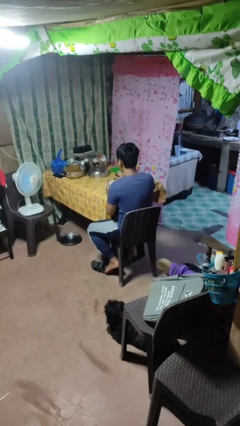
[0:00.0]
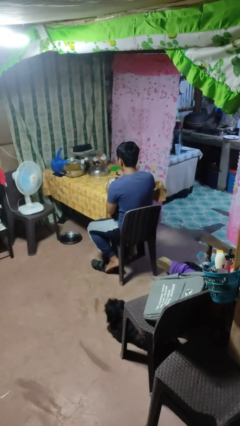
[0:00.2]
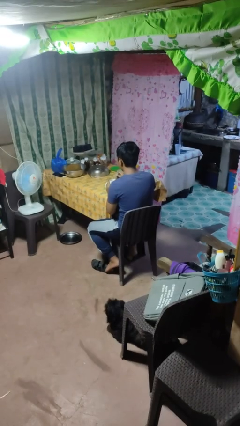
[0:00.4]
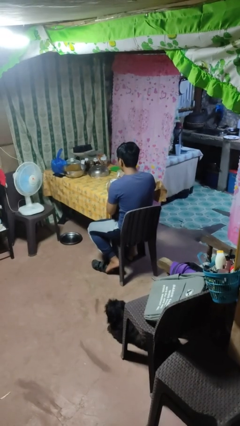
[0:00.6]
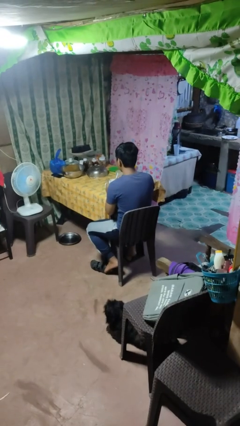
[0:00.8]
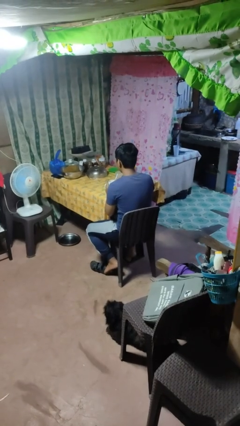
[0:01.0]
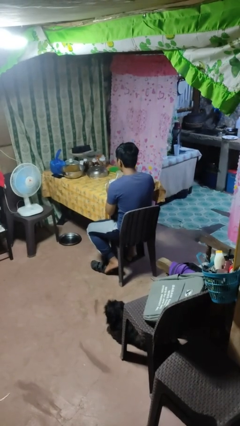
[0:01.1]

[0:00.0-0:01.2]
person stirs mug

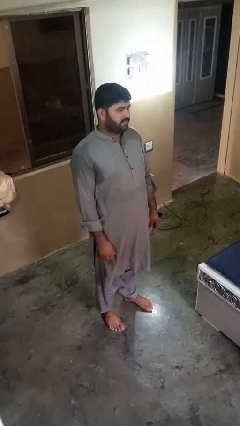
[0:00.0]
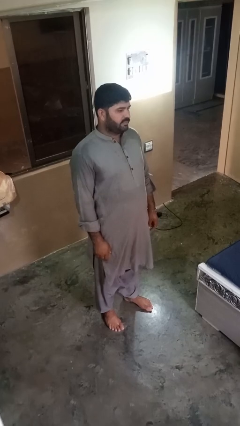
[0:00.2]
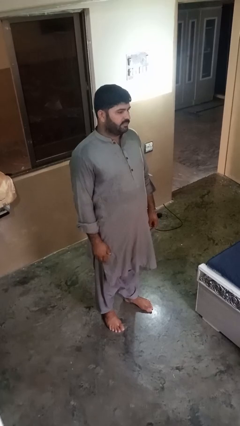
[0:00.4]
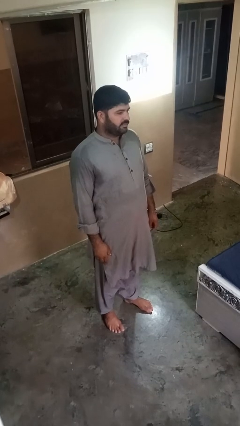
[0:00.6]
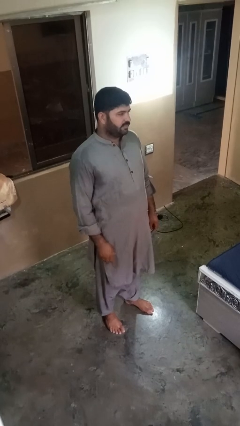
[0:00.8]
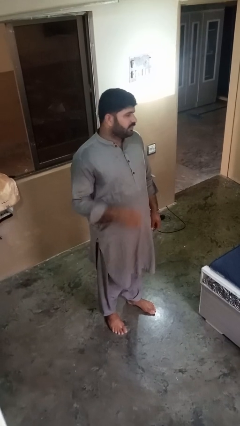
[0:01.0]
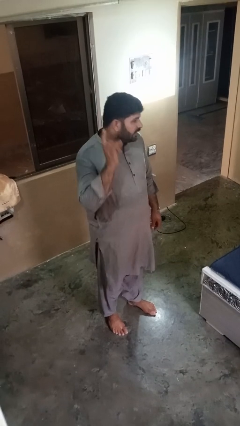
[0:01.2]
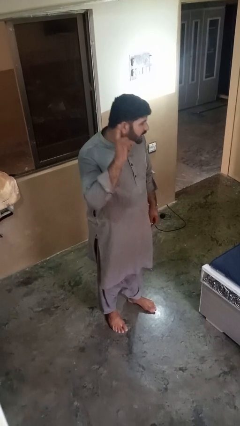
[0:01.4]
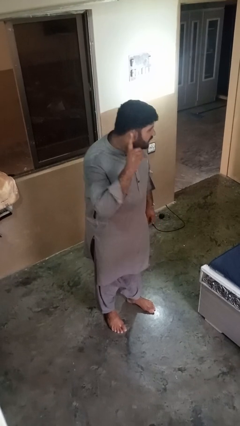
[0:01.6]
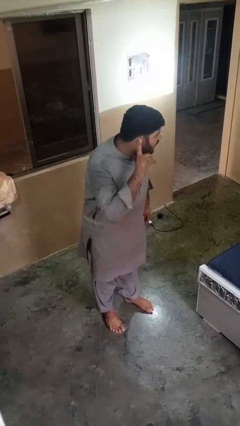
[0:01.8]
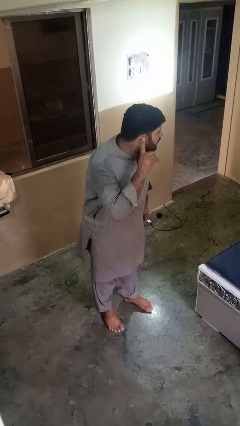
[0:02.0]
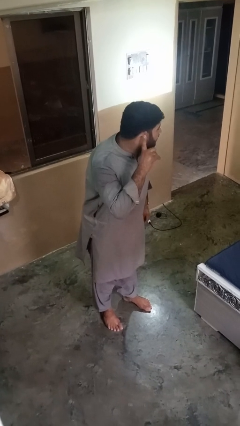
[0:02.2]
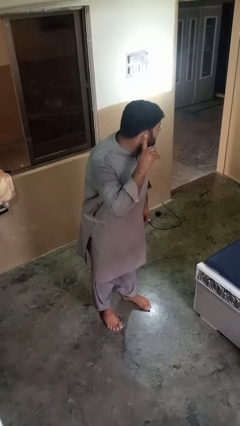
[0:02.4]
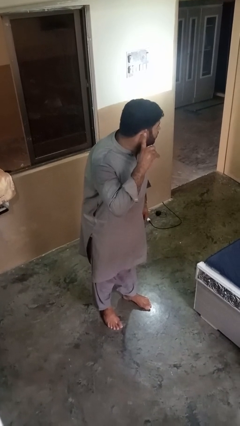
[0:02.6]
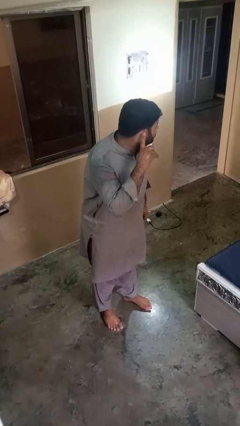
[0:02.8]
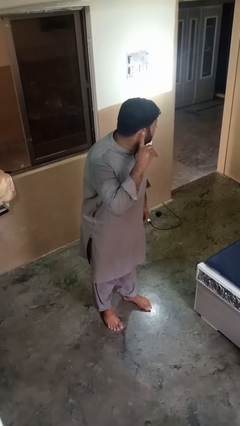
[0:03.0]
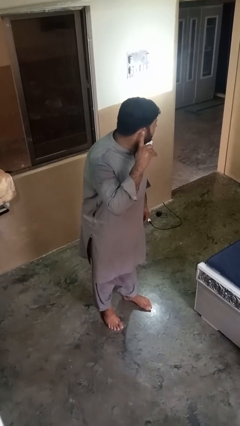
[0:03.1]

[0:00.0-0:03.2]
person gestures listen closely

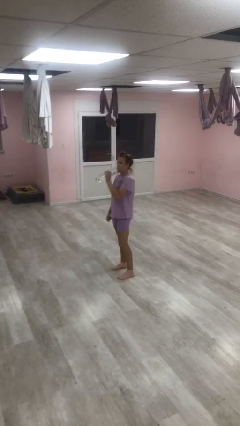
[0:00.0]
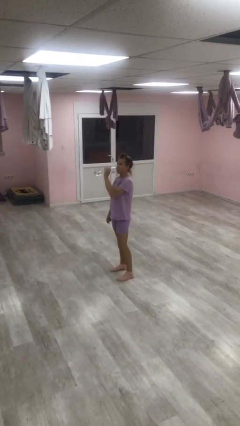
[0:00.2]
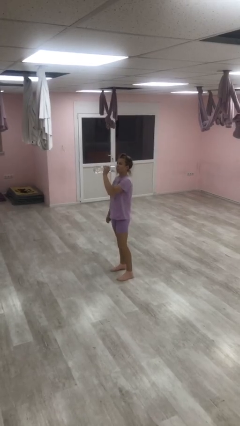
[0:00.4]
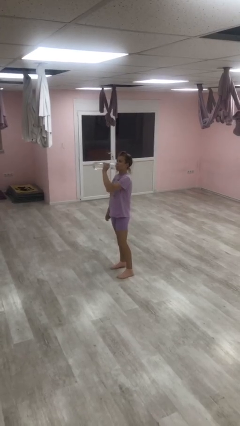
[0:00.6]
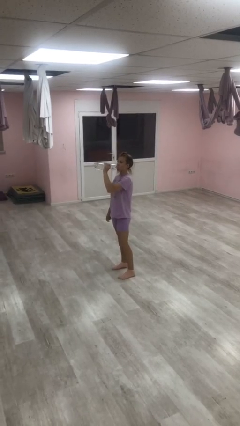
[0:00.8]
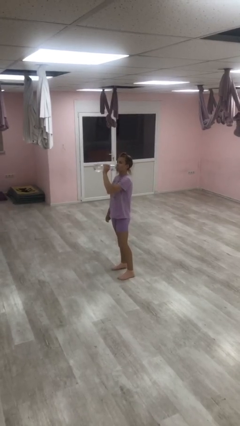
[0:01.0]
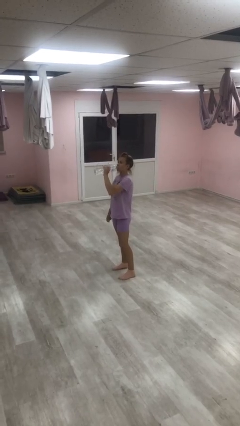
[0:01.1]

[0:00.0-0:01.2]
person drinks from bottle

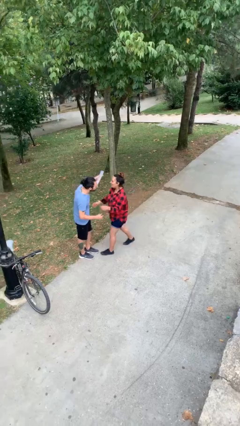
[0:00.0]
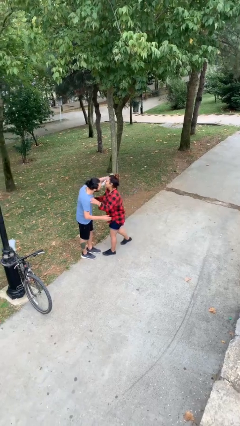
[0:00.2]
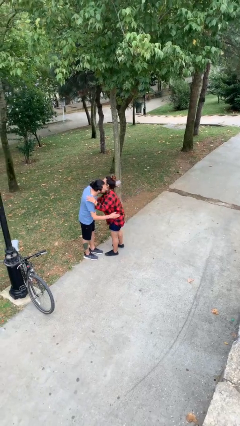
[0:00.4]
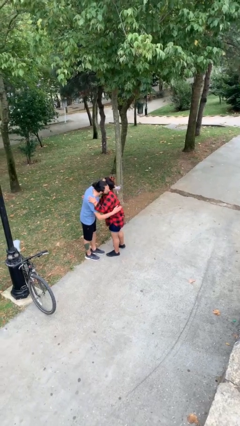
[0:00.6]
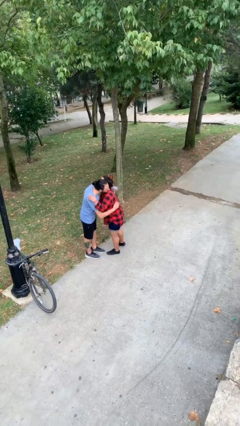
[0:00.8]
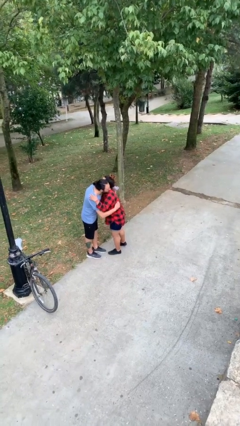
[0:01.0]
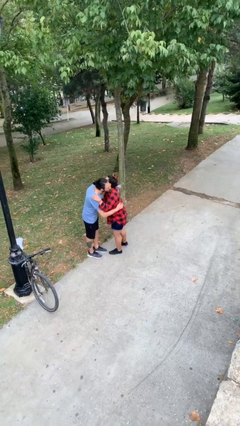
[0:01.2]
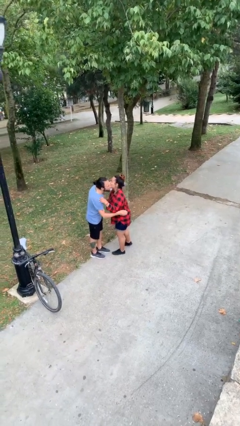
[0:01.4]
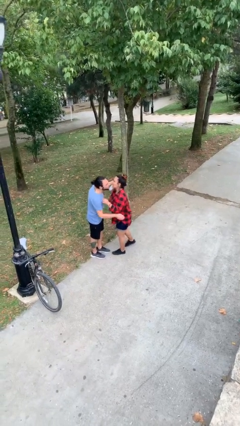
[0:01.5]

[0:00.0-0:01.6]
person embraces person

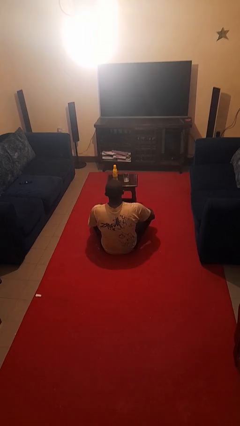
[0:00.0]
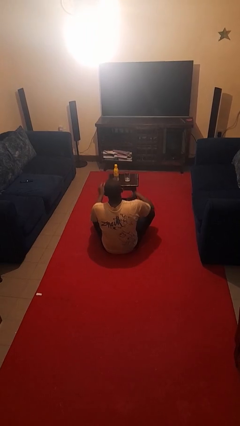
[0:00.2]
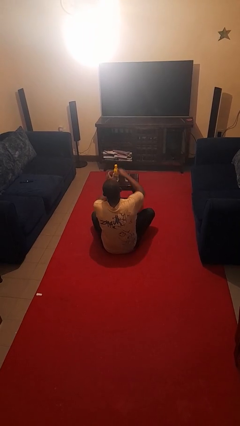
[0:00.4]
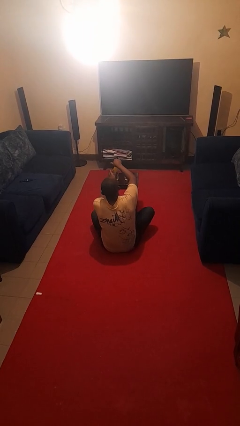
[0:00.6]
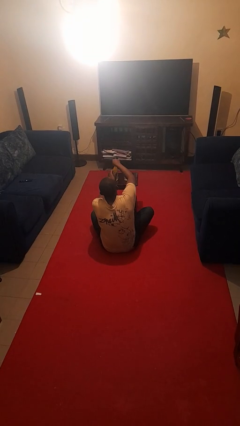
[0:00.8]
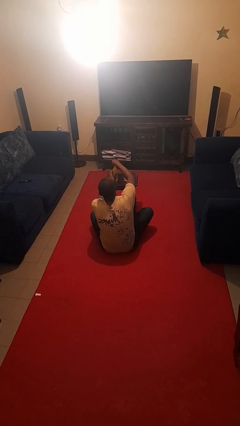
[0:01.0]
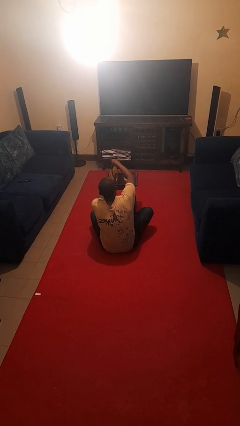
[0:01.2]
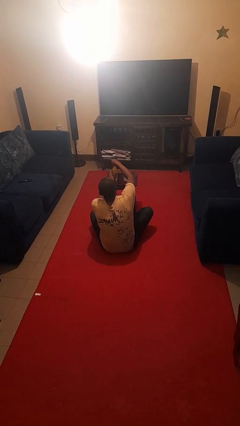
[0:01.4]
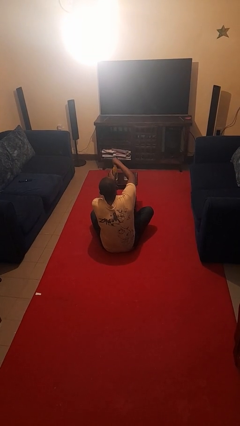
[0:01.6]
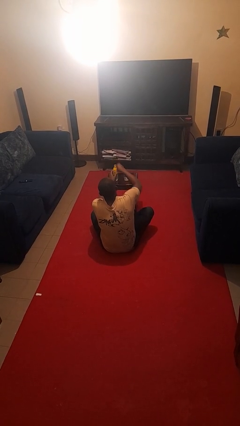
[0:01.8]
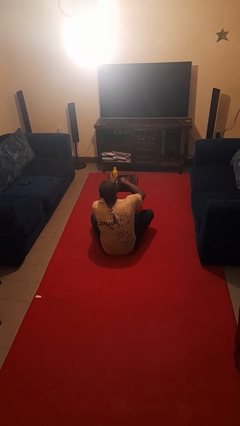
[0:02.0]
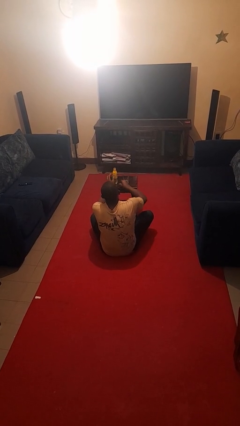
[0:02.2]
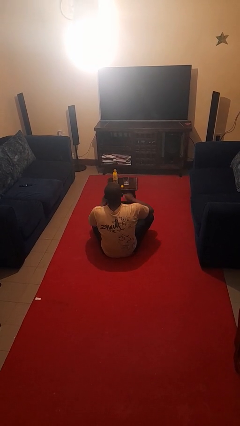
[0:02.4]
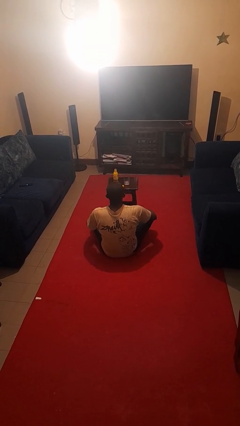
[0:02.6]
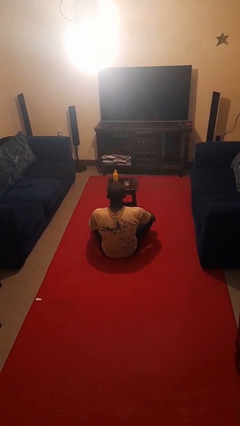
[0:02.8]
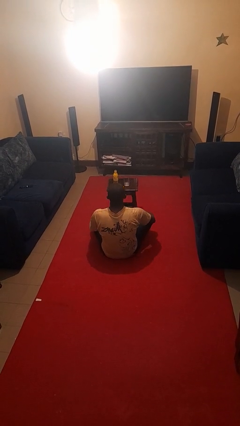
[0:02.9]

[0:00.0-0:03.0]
person unscrews lid from bottle

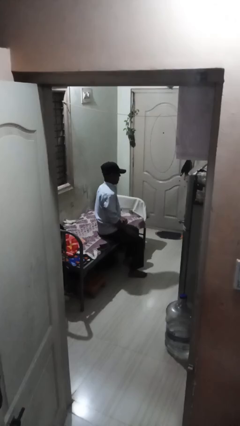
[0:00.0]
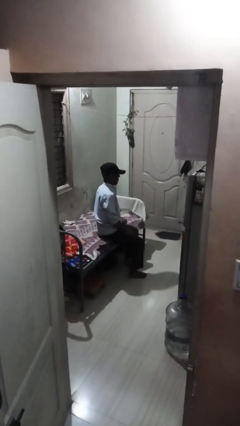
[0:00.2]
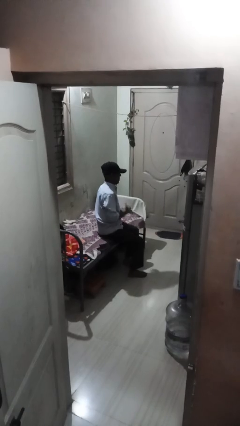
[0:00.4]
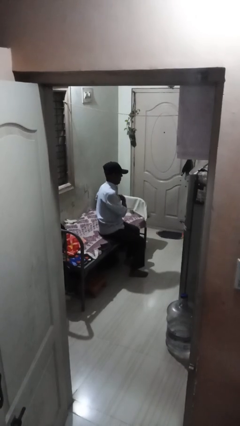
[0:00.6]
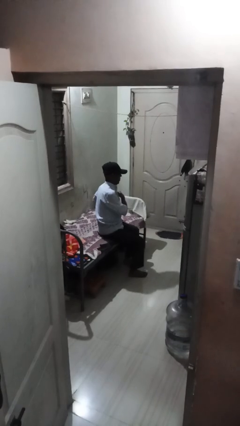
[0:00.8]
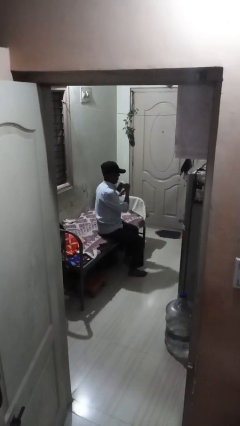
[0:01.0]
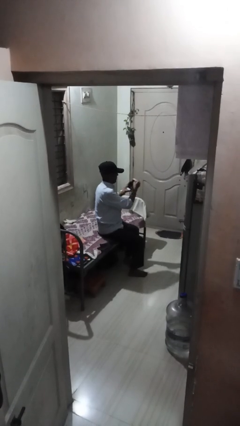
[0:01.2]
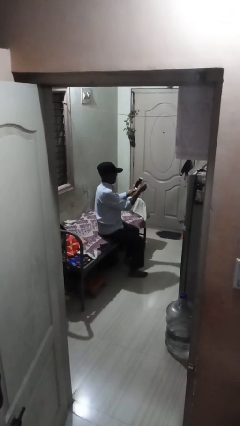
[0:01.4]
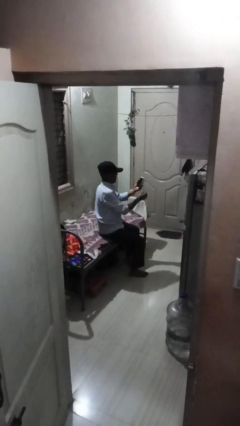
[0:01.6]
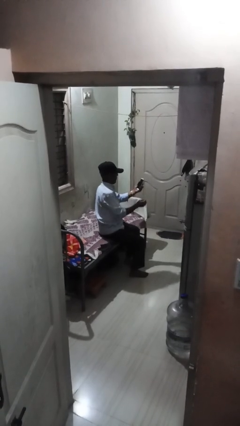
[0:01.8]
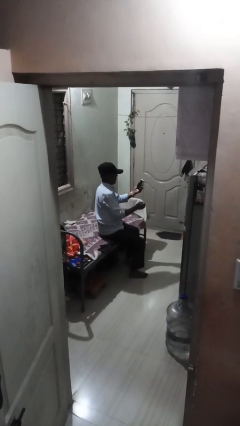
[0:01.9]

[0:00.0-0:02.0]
person takes phone from pocket

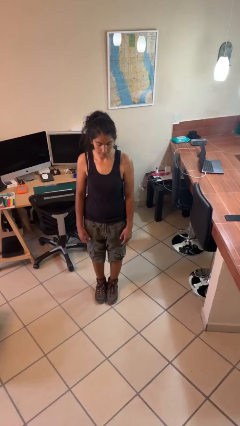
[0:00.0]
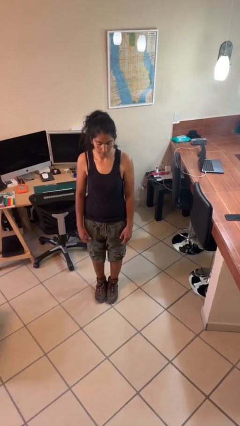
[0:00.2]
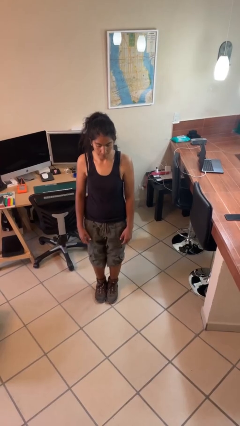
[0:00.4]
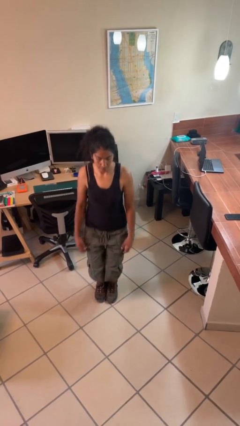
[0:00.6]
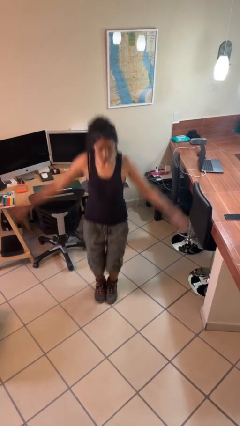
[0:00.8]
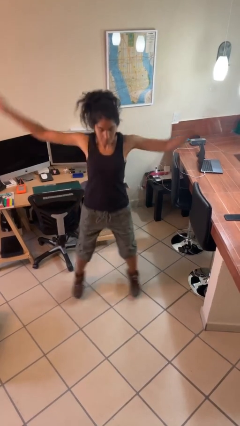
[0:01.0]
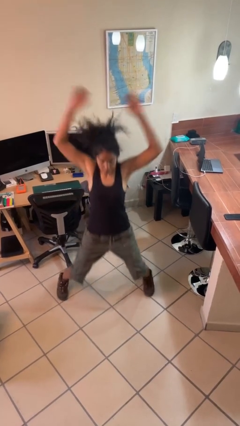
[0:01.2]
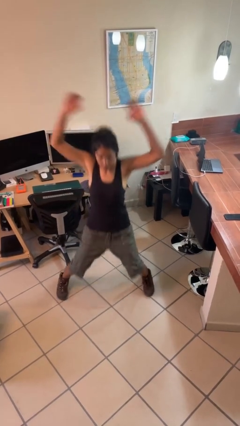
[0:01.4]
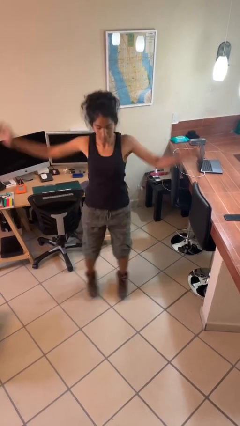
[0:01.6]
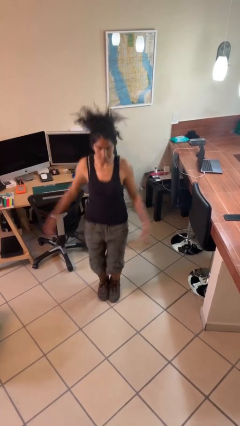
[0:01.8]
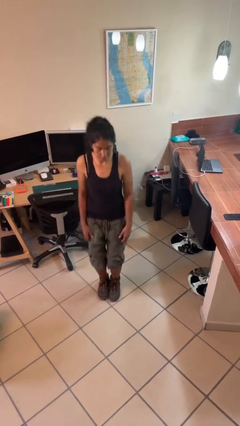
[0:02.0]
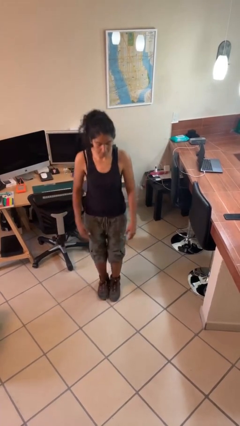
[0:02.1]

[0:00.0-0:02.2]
person exercises with jumping jacks

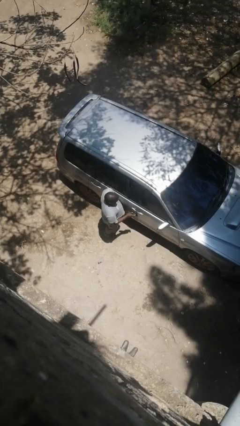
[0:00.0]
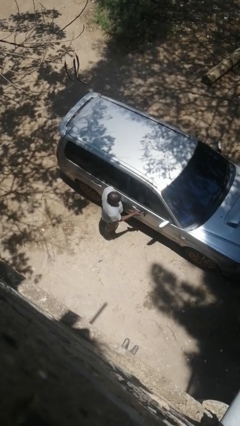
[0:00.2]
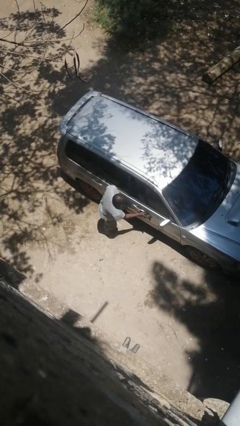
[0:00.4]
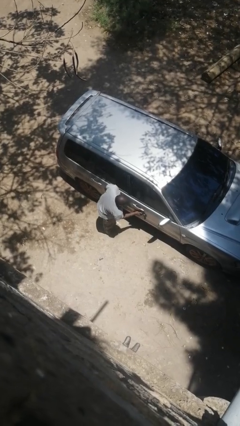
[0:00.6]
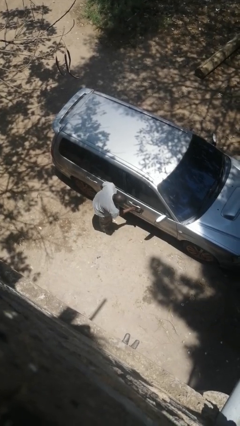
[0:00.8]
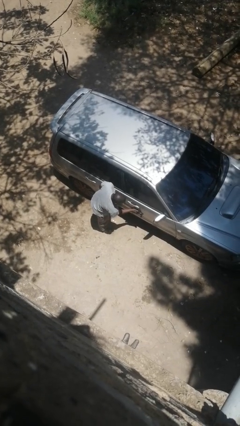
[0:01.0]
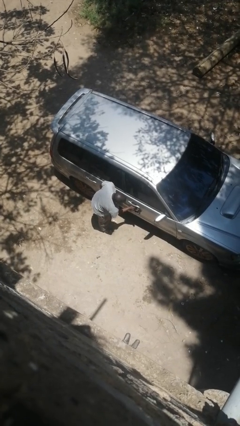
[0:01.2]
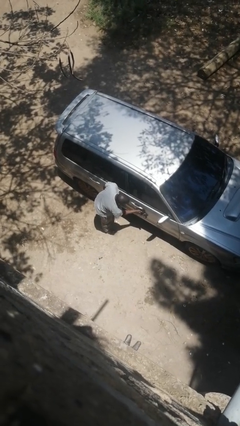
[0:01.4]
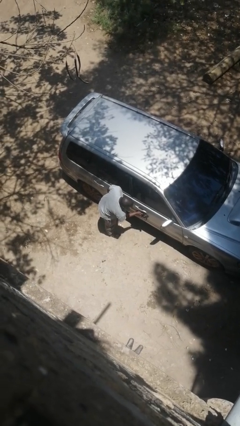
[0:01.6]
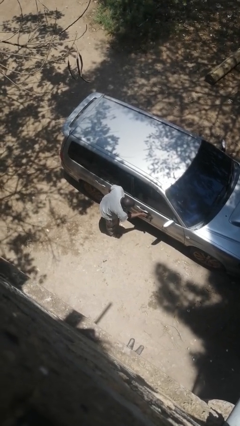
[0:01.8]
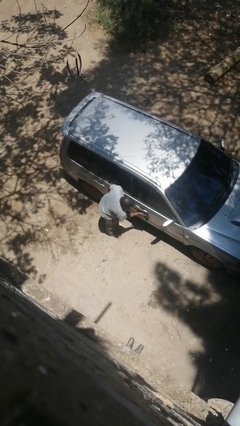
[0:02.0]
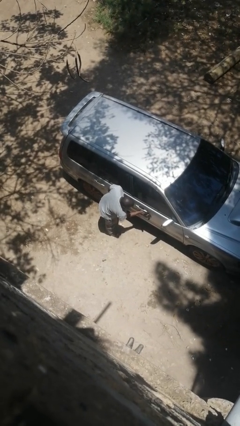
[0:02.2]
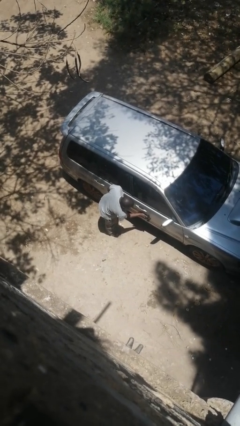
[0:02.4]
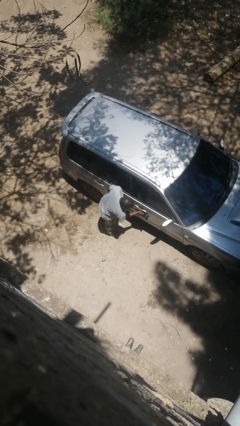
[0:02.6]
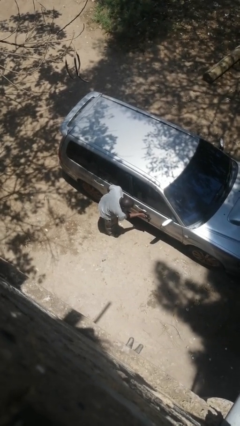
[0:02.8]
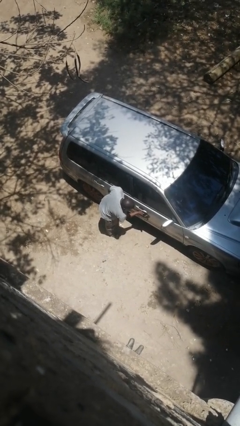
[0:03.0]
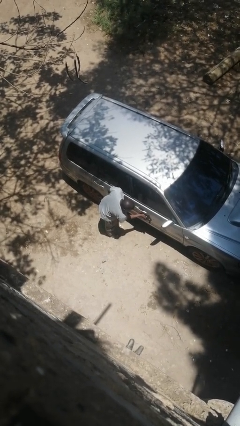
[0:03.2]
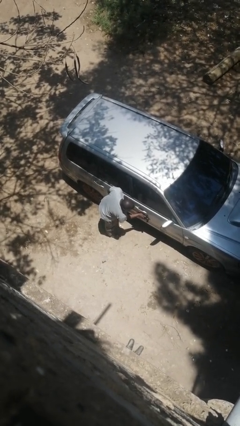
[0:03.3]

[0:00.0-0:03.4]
person polishes car with rag
